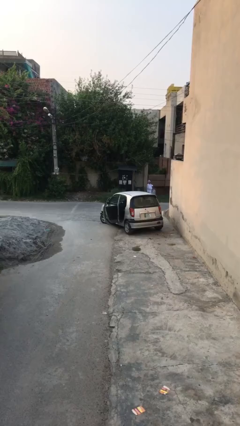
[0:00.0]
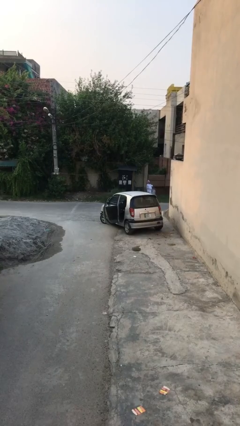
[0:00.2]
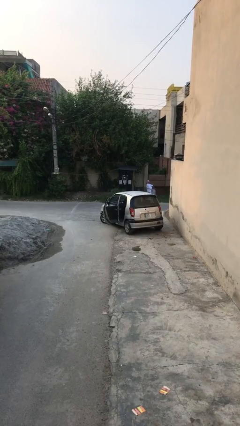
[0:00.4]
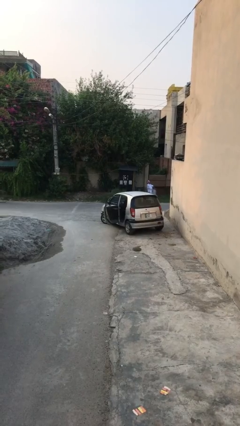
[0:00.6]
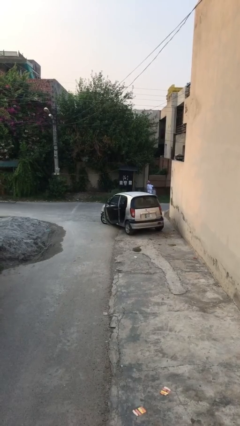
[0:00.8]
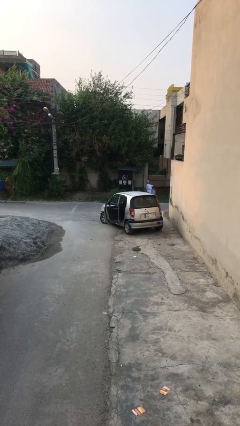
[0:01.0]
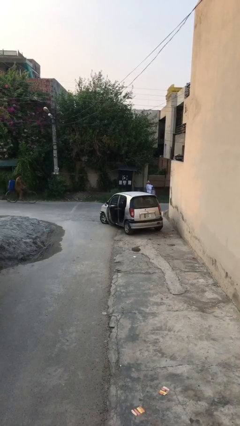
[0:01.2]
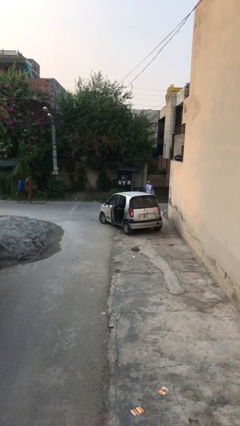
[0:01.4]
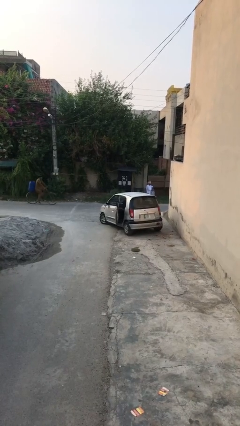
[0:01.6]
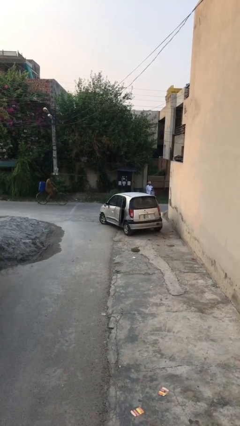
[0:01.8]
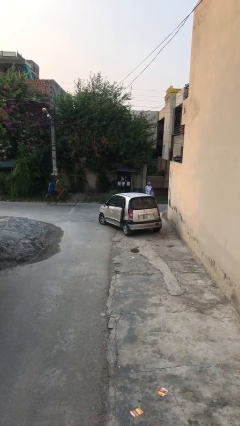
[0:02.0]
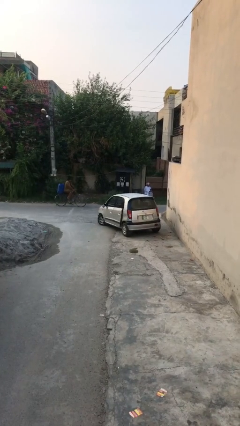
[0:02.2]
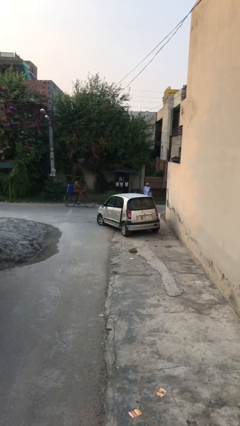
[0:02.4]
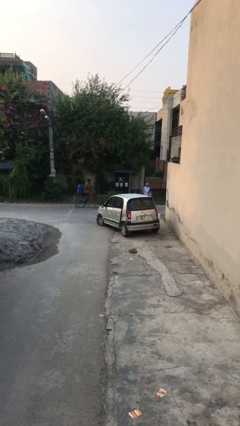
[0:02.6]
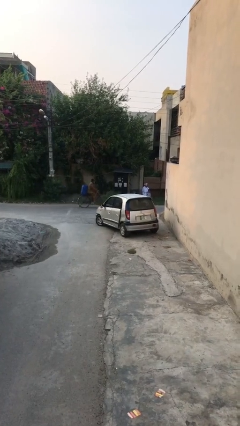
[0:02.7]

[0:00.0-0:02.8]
person closes car door

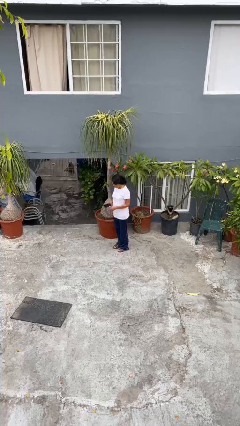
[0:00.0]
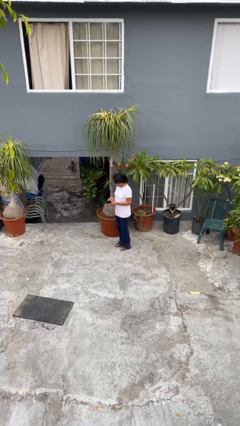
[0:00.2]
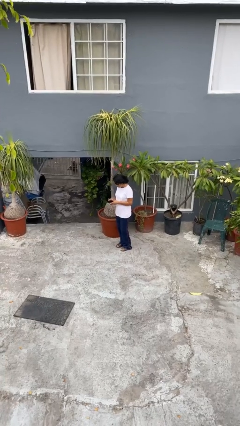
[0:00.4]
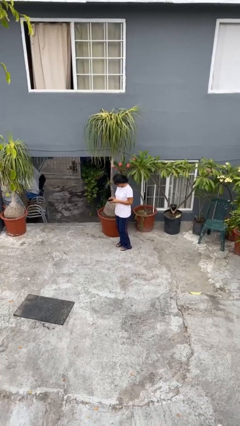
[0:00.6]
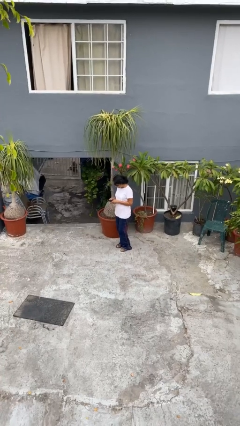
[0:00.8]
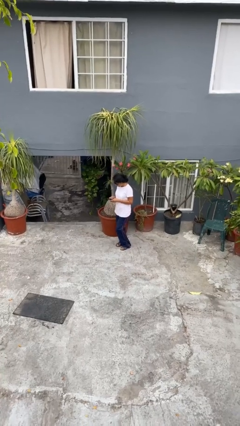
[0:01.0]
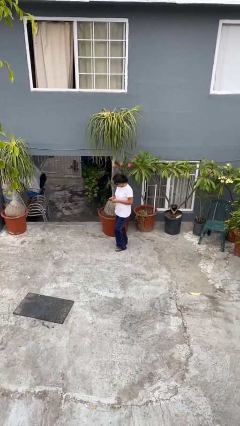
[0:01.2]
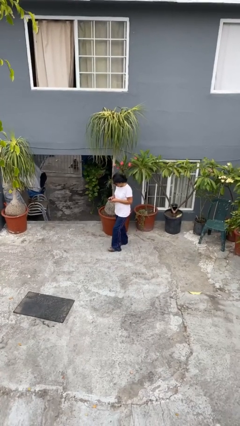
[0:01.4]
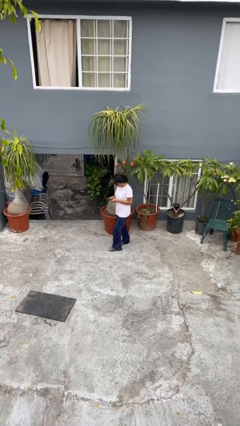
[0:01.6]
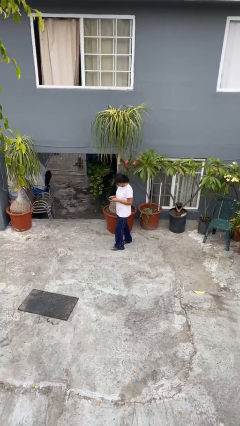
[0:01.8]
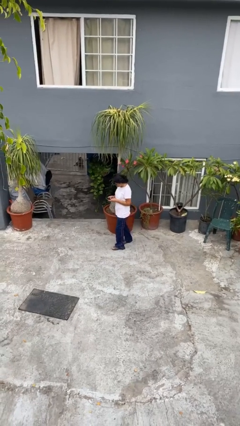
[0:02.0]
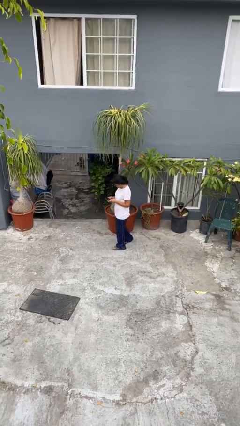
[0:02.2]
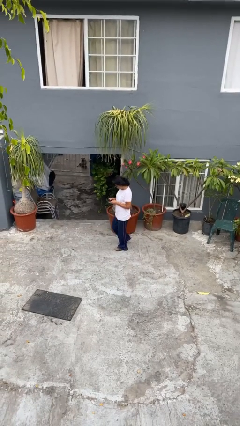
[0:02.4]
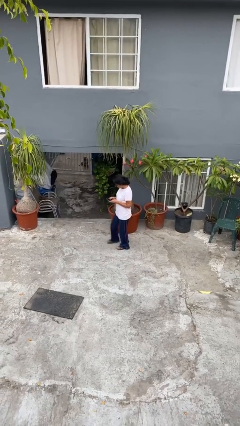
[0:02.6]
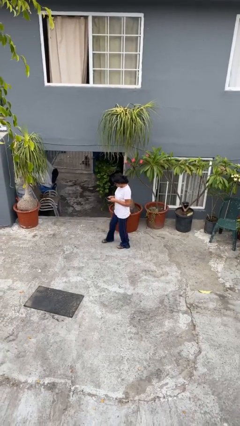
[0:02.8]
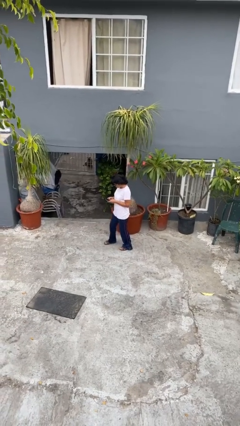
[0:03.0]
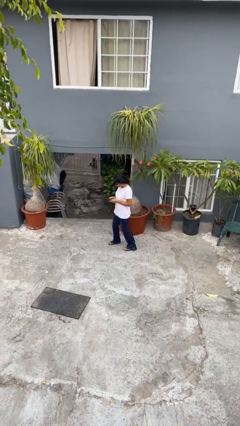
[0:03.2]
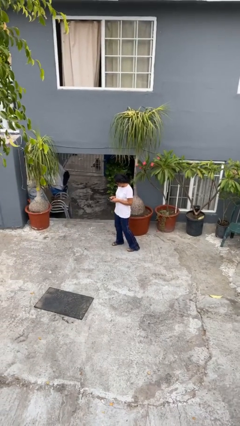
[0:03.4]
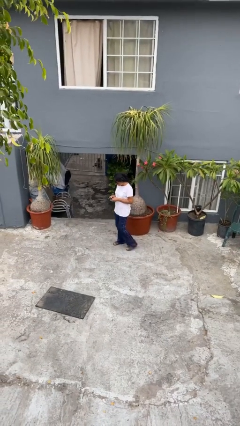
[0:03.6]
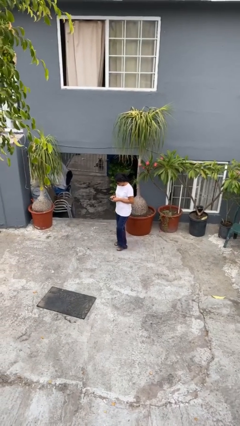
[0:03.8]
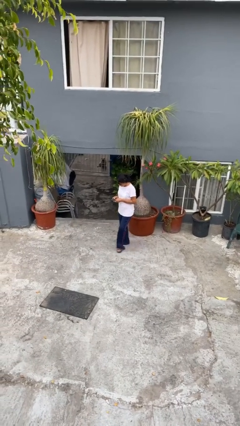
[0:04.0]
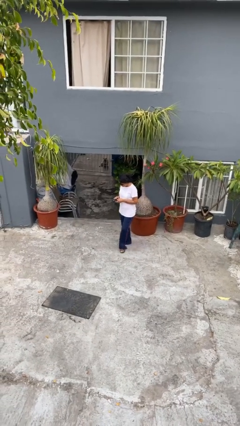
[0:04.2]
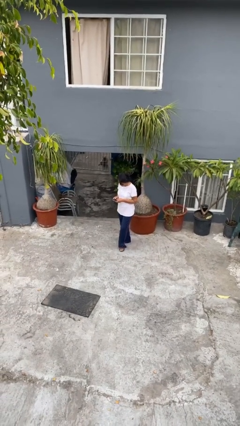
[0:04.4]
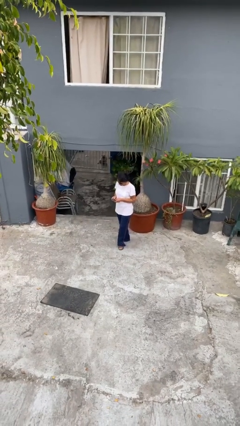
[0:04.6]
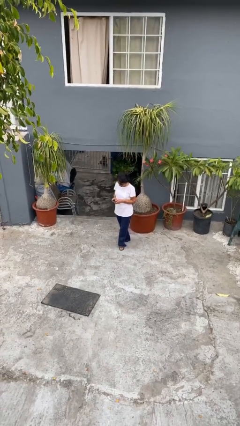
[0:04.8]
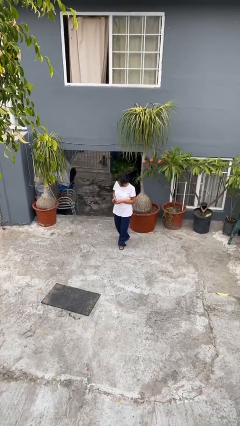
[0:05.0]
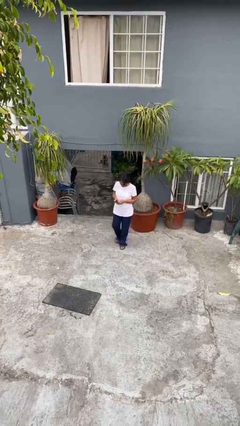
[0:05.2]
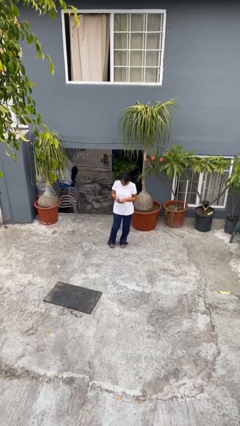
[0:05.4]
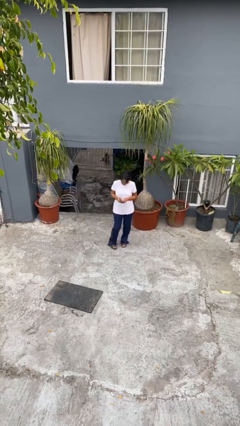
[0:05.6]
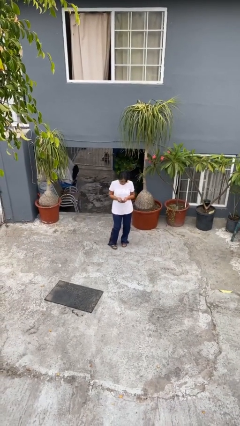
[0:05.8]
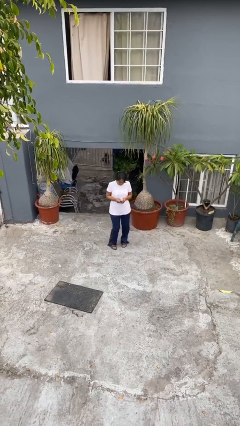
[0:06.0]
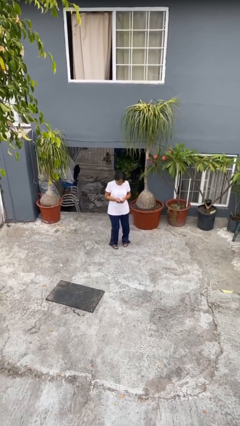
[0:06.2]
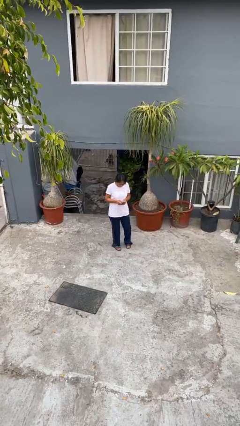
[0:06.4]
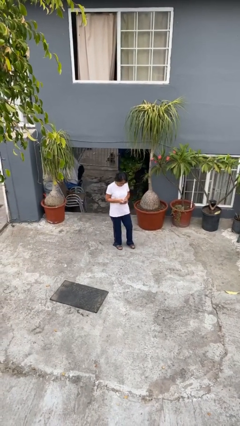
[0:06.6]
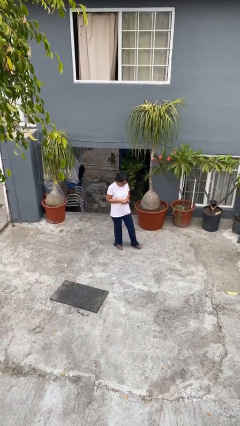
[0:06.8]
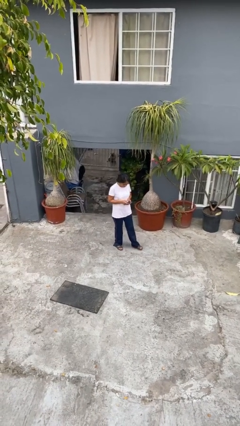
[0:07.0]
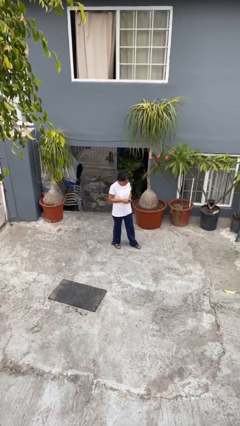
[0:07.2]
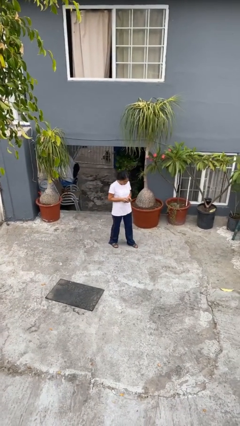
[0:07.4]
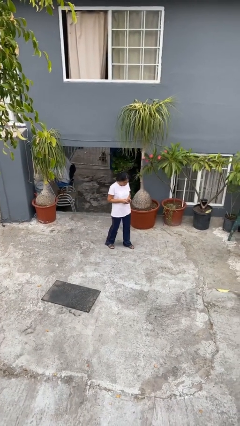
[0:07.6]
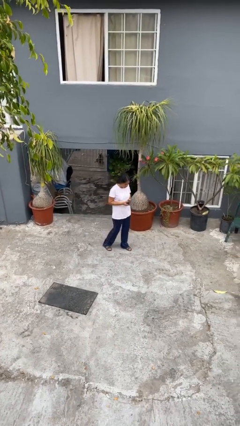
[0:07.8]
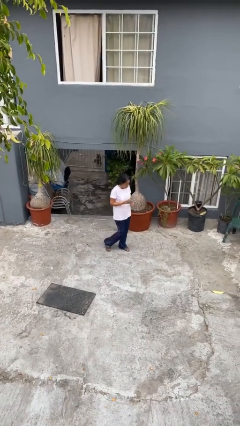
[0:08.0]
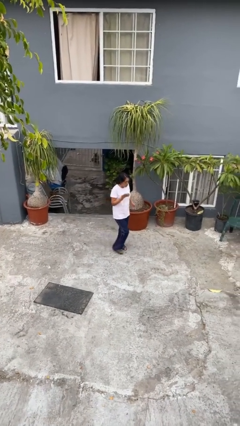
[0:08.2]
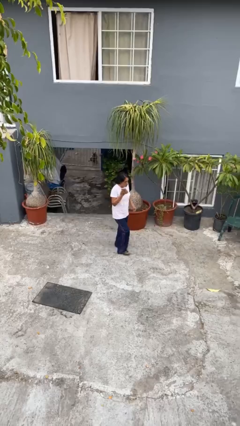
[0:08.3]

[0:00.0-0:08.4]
person texts on phone

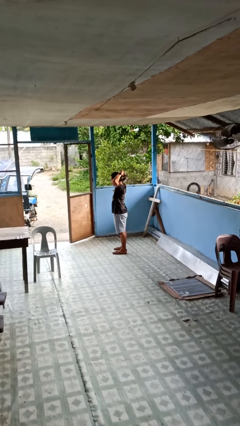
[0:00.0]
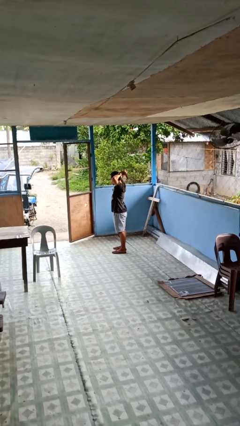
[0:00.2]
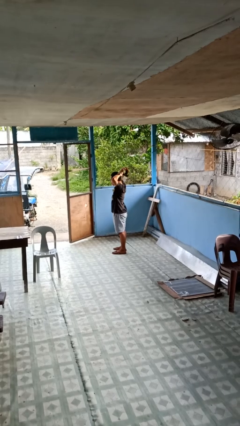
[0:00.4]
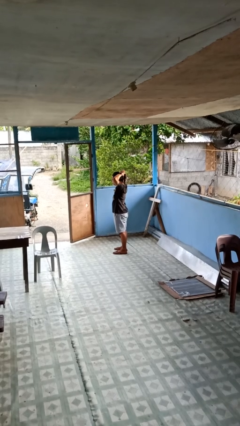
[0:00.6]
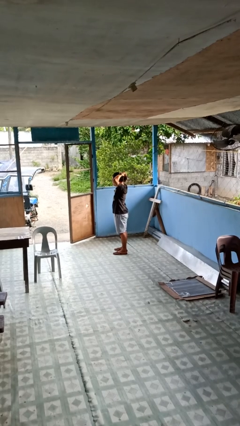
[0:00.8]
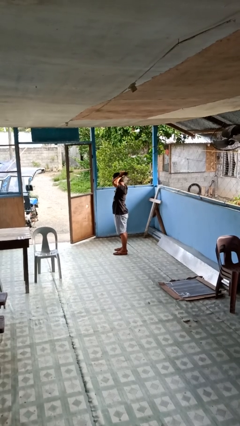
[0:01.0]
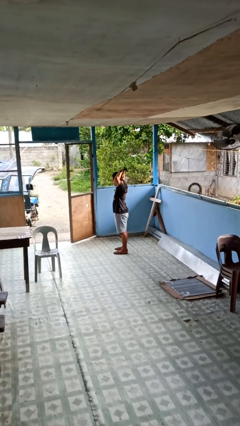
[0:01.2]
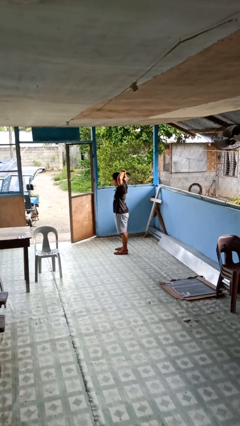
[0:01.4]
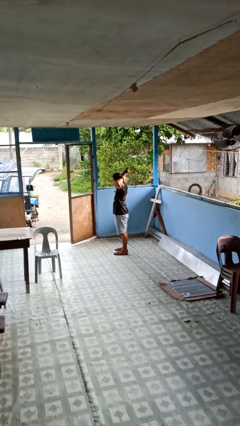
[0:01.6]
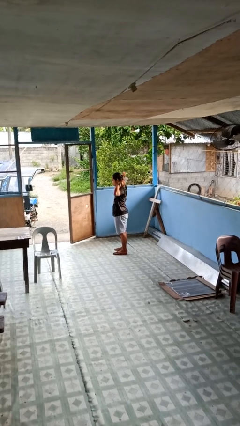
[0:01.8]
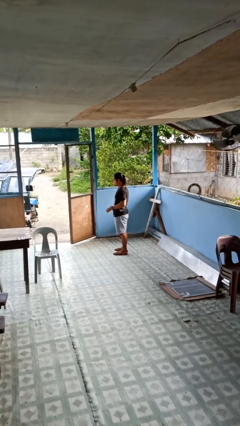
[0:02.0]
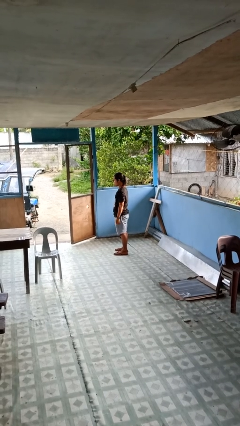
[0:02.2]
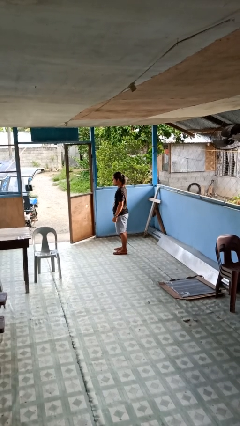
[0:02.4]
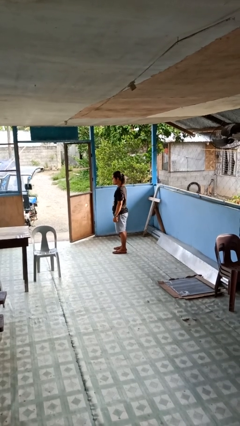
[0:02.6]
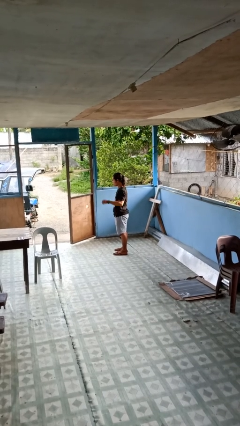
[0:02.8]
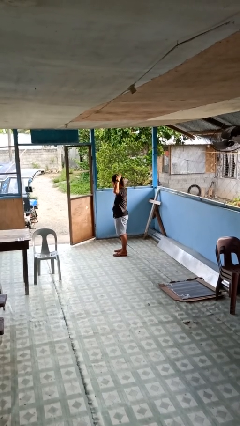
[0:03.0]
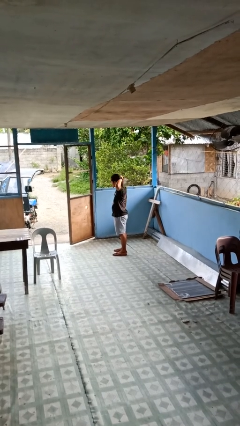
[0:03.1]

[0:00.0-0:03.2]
person puts hair in ponytail

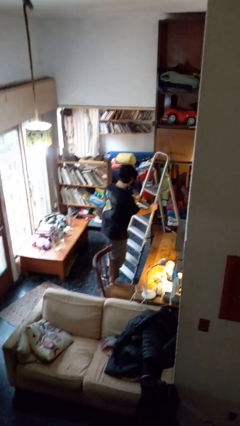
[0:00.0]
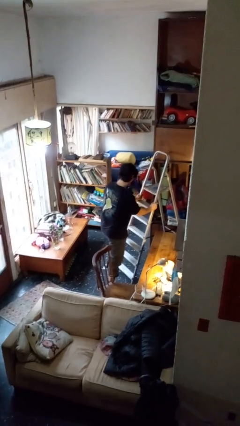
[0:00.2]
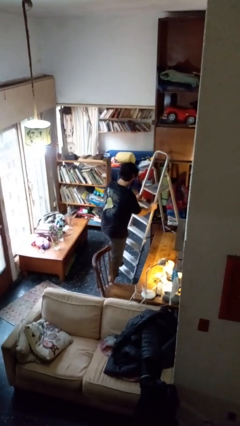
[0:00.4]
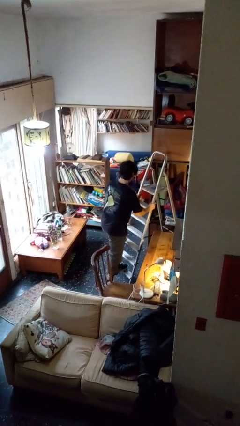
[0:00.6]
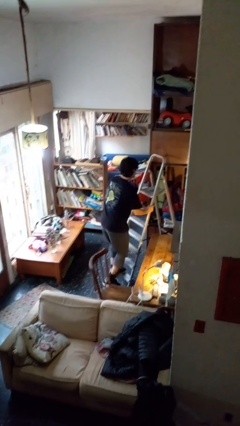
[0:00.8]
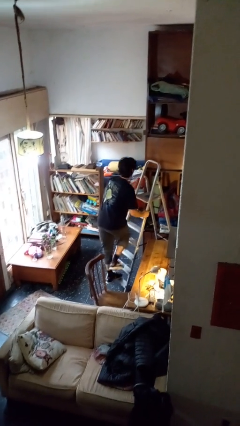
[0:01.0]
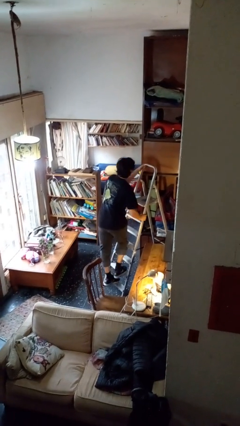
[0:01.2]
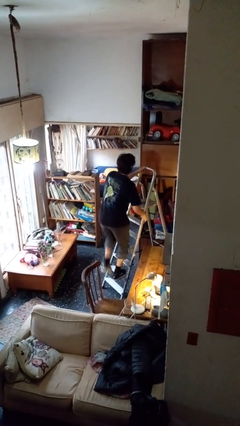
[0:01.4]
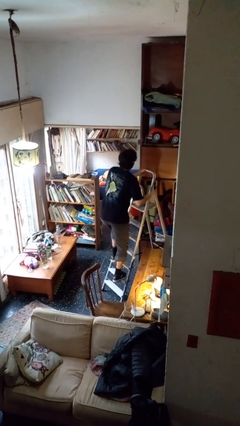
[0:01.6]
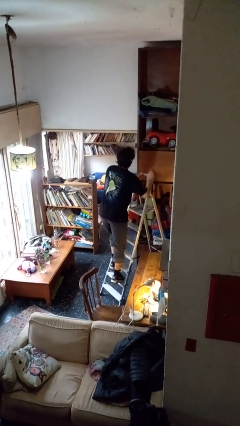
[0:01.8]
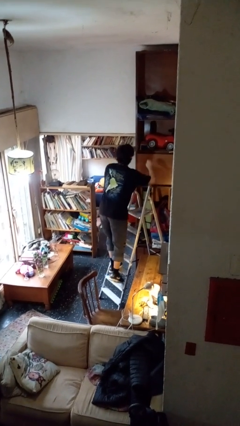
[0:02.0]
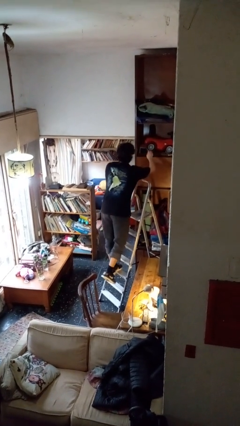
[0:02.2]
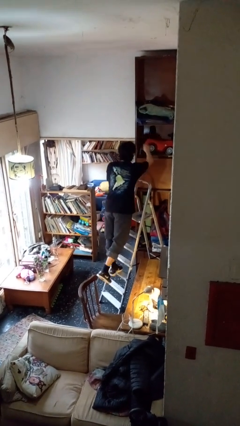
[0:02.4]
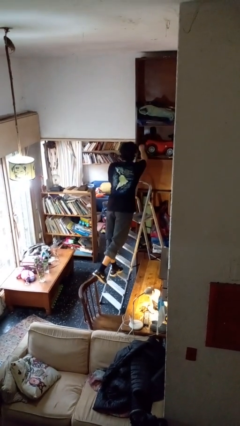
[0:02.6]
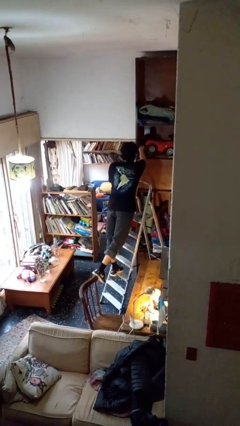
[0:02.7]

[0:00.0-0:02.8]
person climbs up ladder

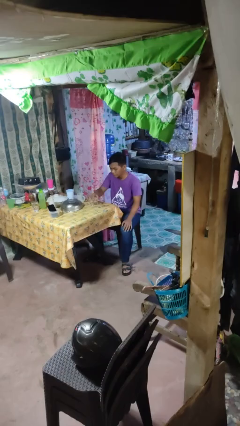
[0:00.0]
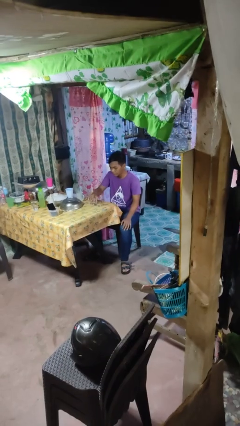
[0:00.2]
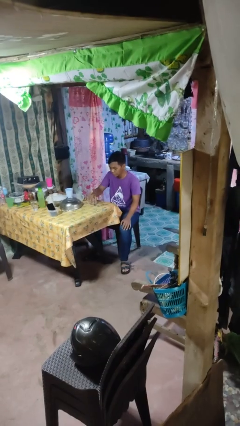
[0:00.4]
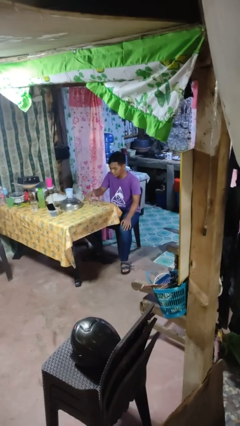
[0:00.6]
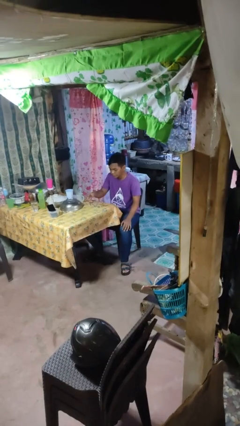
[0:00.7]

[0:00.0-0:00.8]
person puts down object on table
